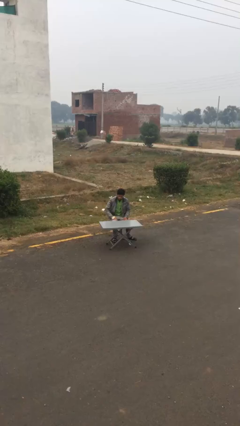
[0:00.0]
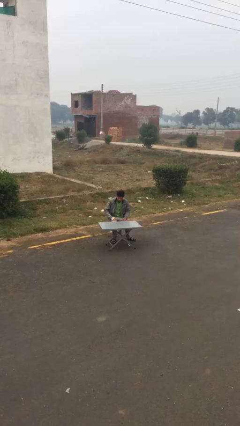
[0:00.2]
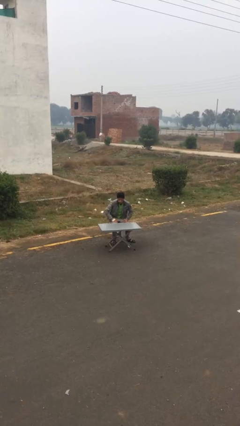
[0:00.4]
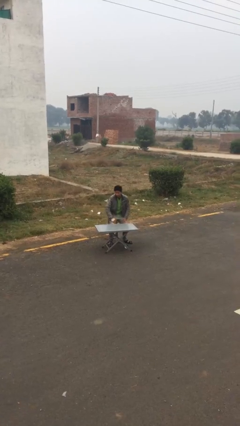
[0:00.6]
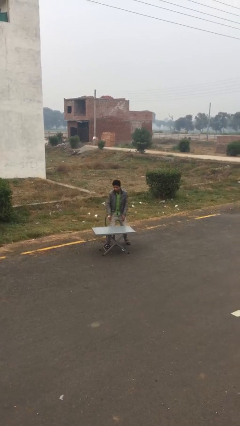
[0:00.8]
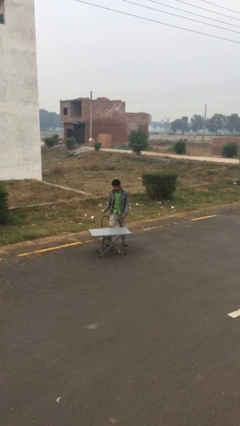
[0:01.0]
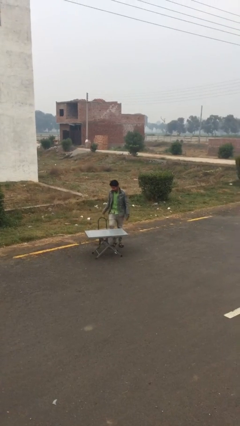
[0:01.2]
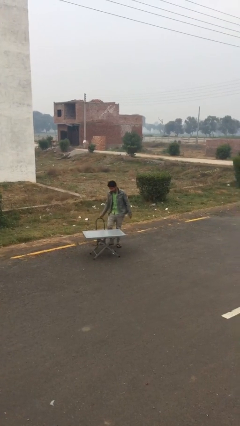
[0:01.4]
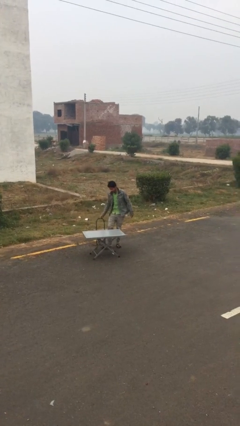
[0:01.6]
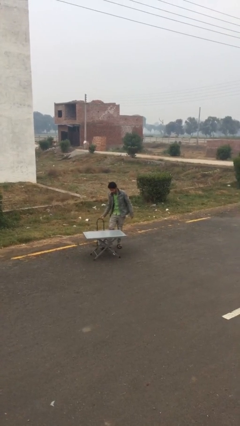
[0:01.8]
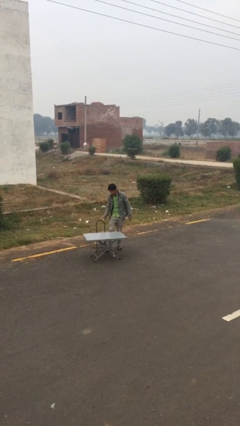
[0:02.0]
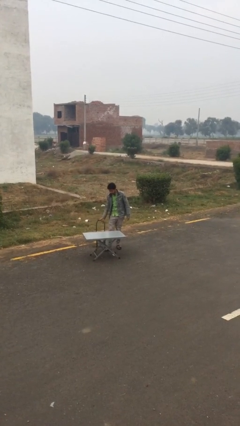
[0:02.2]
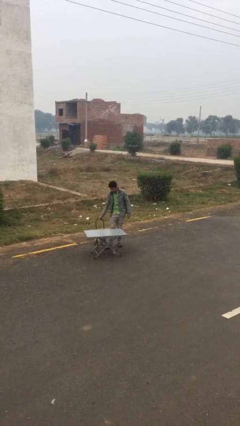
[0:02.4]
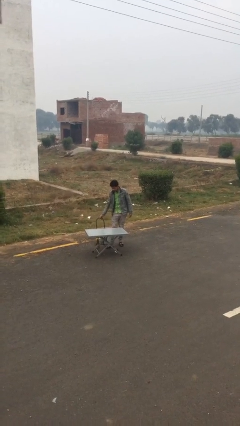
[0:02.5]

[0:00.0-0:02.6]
person stands up

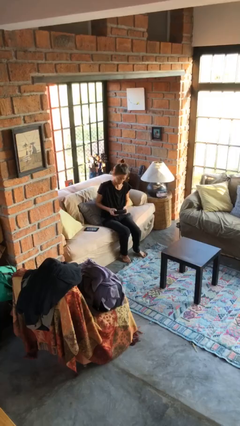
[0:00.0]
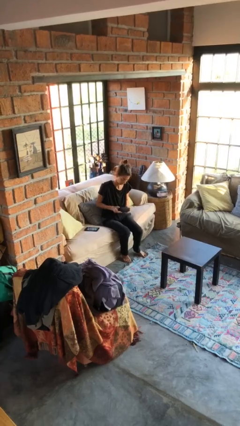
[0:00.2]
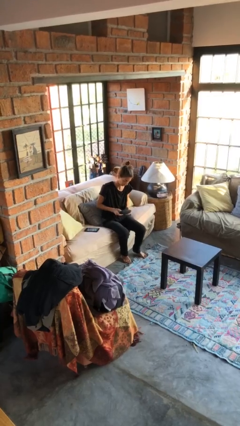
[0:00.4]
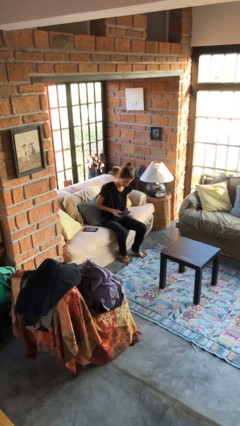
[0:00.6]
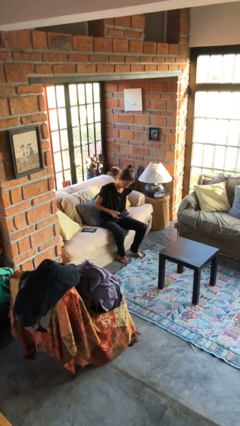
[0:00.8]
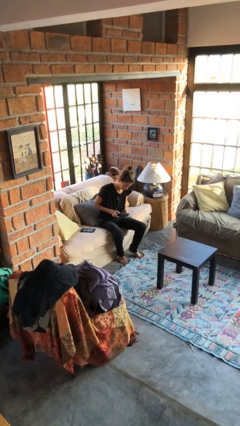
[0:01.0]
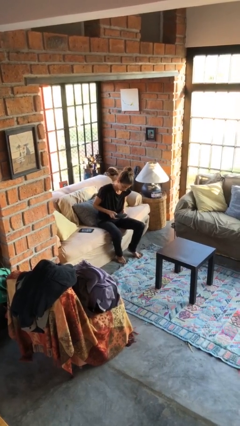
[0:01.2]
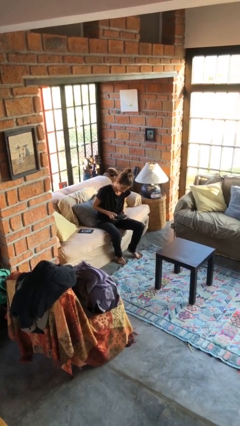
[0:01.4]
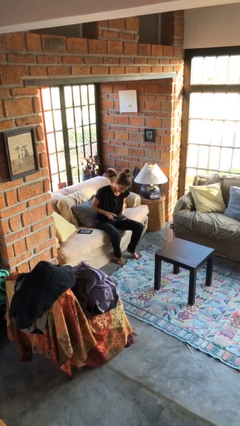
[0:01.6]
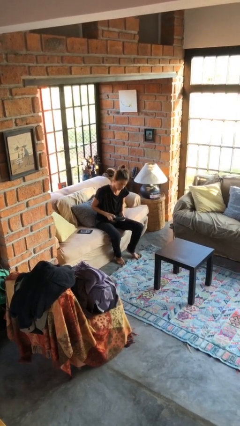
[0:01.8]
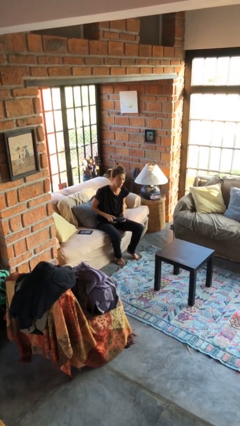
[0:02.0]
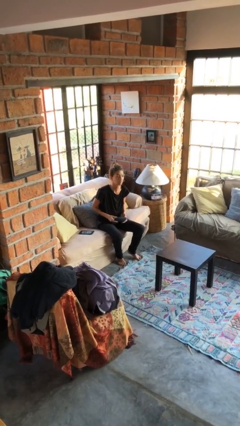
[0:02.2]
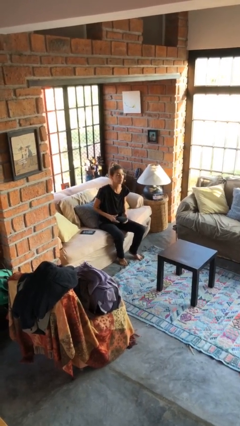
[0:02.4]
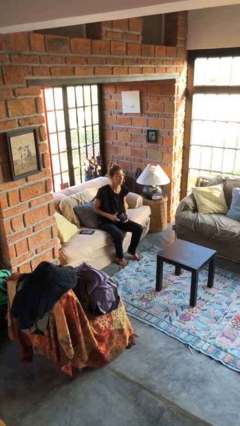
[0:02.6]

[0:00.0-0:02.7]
person interacts with handheld game

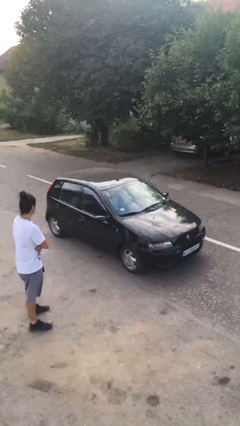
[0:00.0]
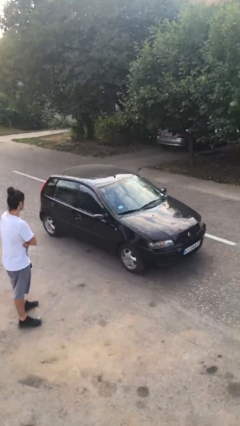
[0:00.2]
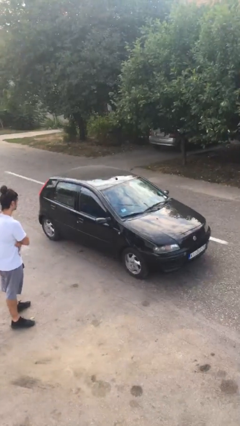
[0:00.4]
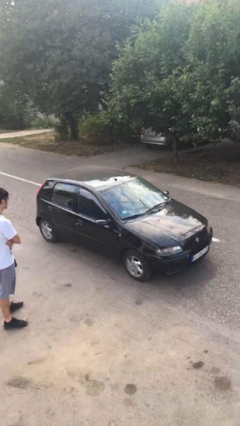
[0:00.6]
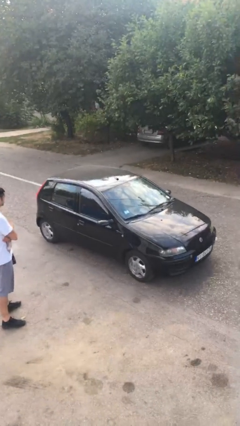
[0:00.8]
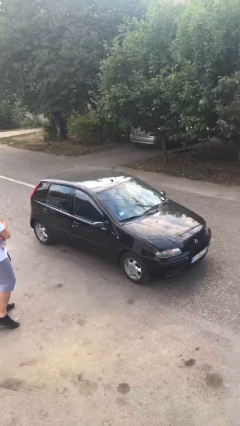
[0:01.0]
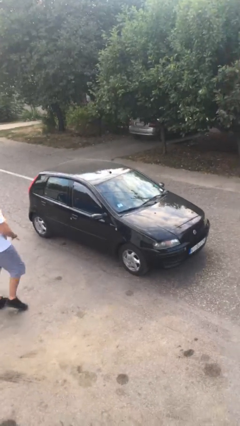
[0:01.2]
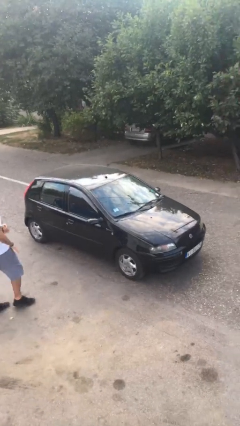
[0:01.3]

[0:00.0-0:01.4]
car picks up person

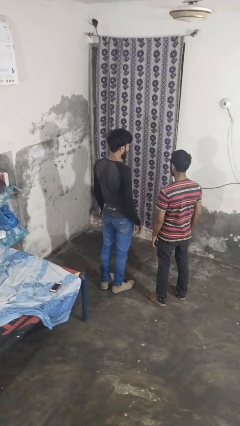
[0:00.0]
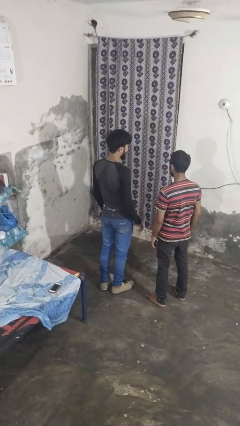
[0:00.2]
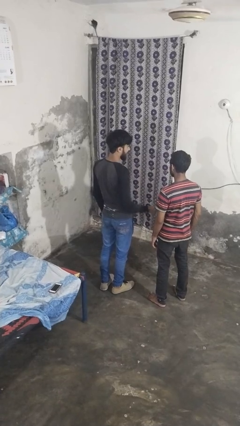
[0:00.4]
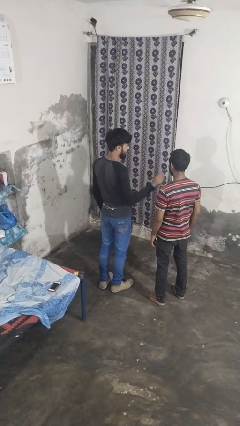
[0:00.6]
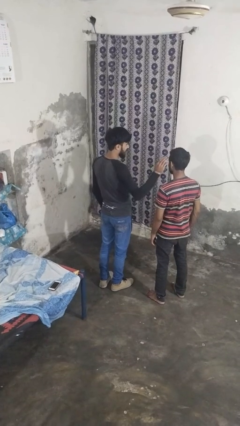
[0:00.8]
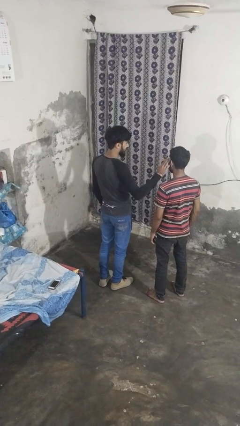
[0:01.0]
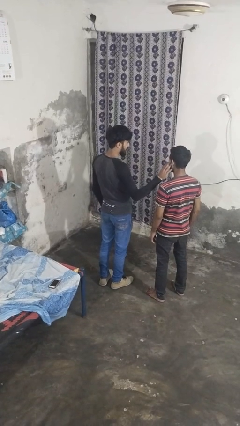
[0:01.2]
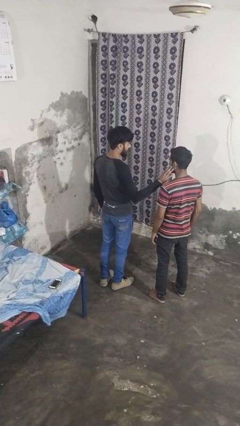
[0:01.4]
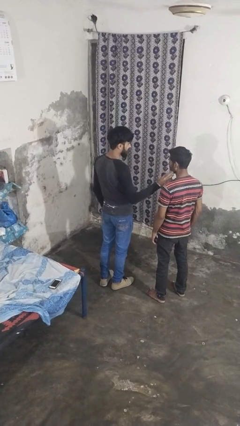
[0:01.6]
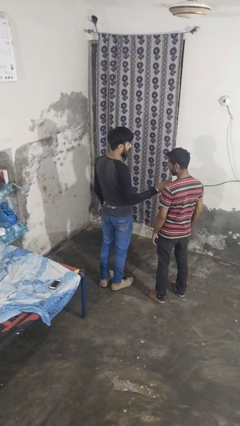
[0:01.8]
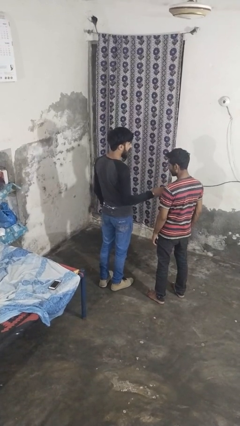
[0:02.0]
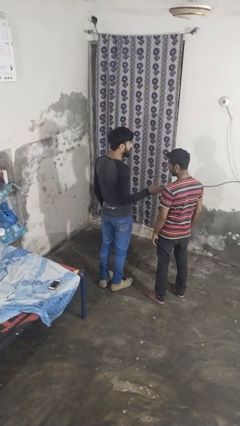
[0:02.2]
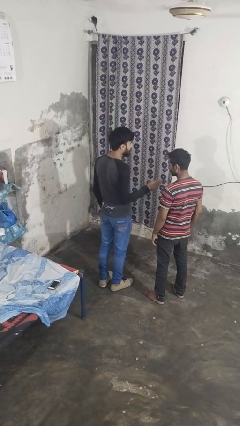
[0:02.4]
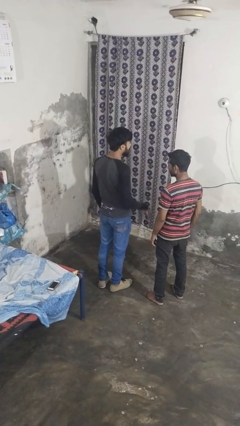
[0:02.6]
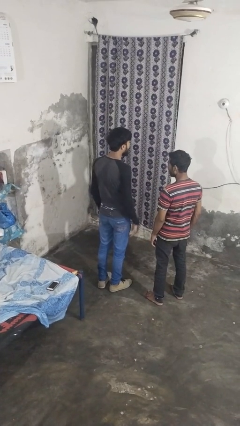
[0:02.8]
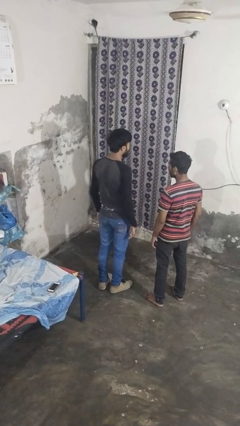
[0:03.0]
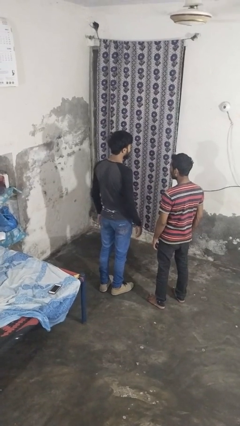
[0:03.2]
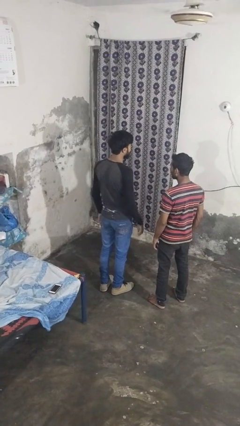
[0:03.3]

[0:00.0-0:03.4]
person touches face of person

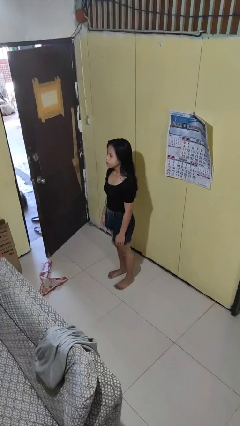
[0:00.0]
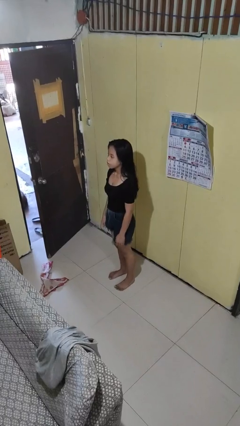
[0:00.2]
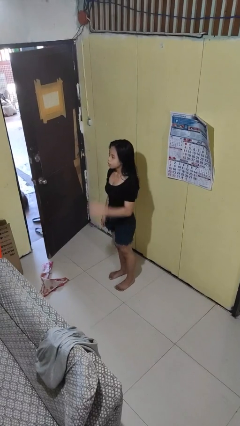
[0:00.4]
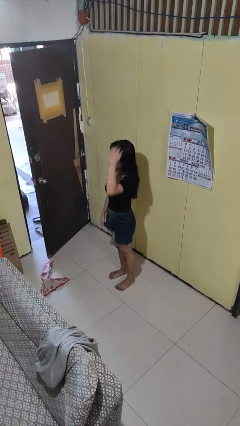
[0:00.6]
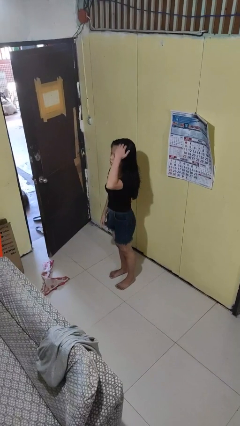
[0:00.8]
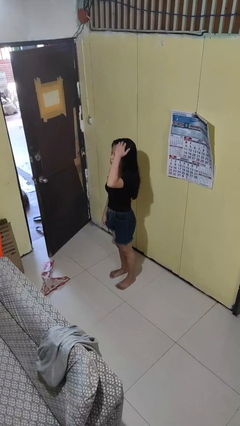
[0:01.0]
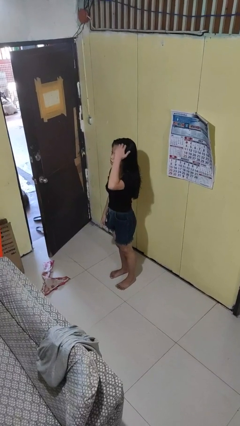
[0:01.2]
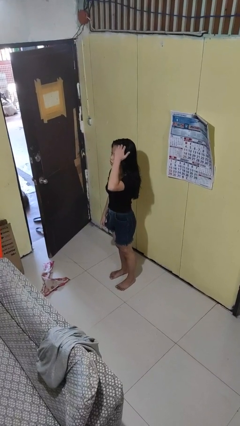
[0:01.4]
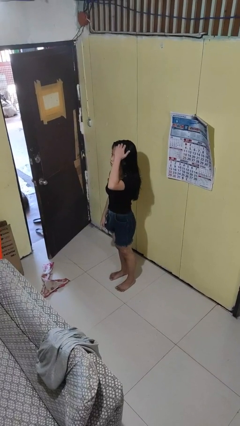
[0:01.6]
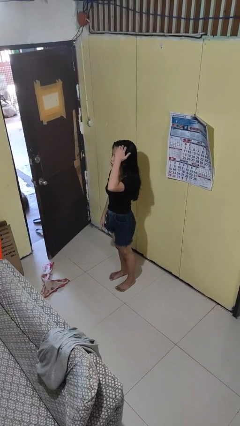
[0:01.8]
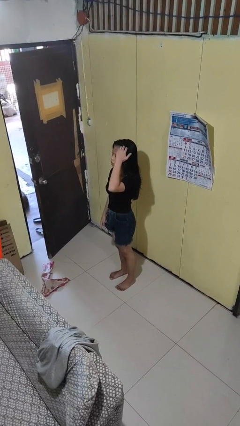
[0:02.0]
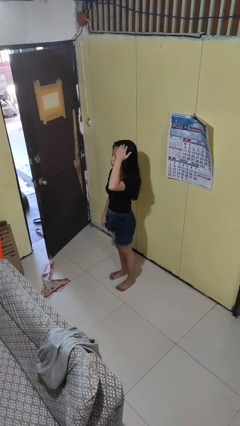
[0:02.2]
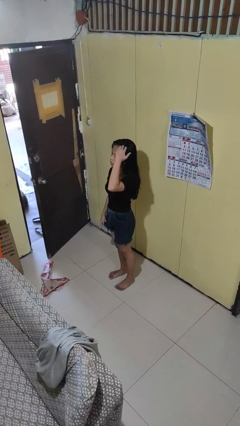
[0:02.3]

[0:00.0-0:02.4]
person scratches face

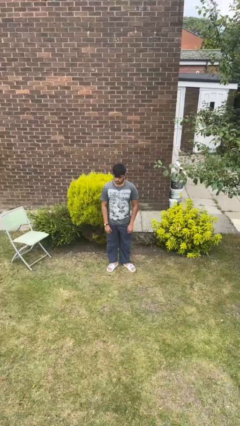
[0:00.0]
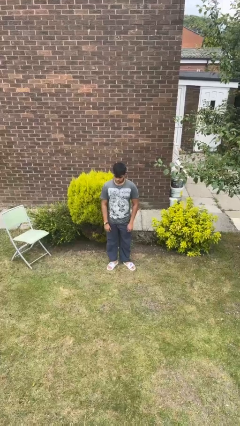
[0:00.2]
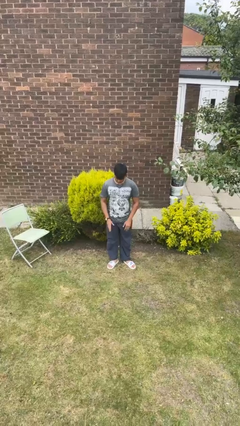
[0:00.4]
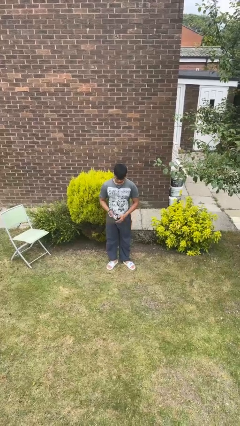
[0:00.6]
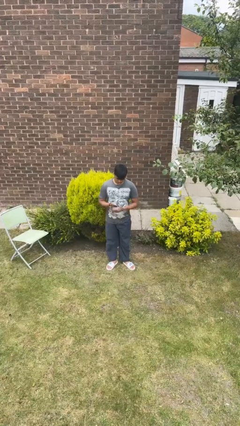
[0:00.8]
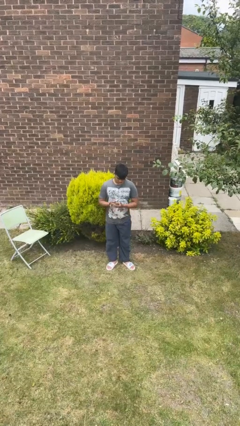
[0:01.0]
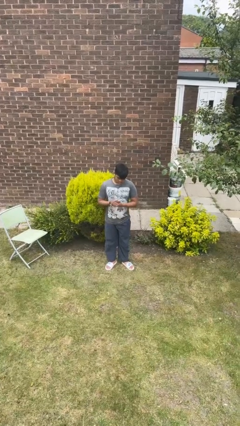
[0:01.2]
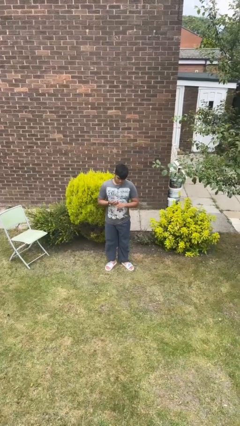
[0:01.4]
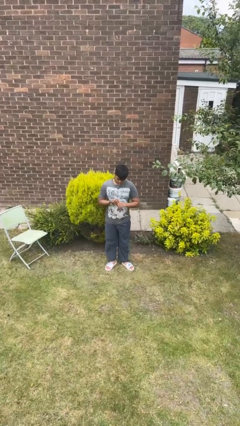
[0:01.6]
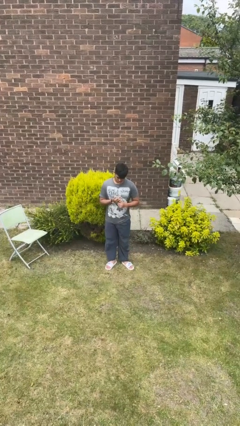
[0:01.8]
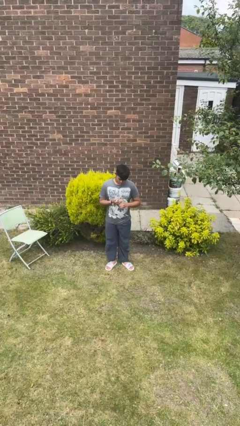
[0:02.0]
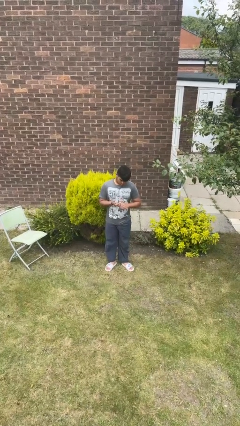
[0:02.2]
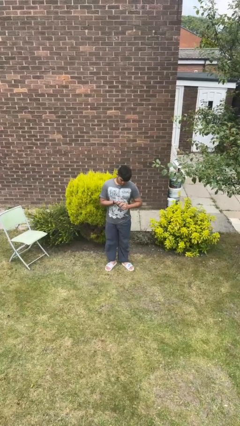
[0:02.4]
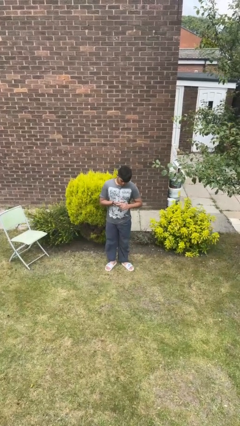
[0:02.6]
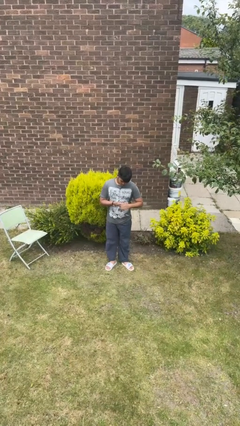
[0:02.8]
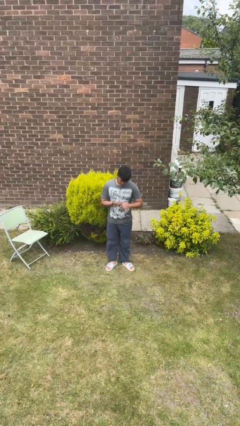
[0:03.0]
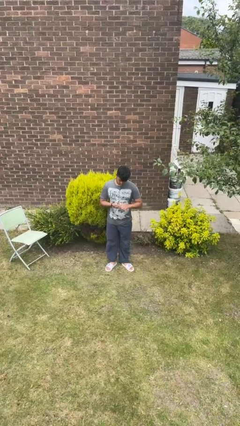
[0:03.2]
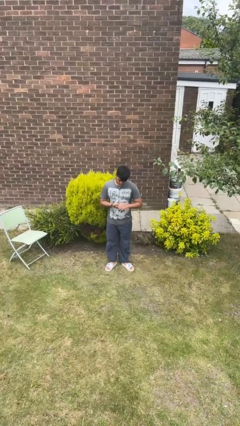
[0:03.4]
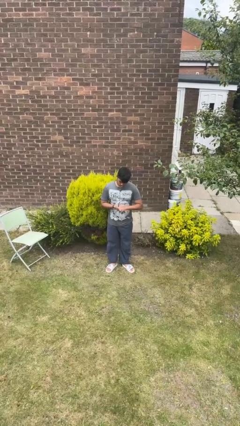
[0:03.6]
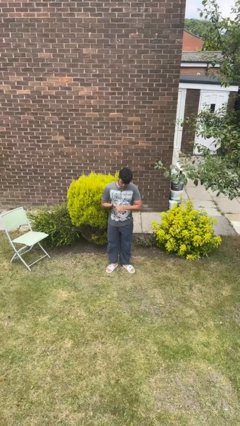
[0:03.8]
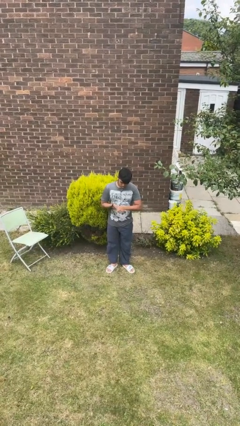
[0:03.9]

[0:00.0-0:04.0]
person cracks knuckles

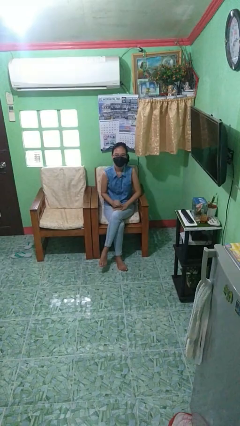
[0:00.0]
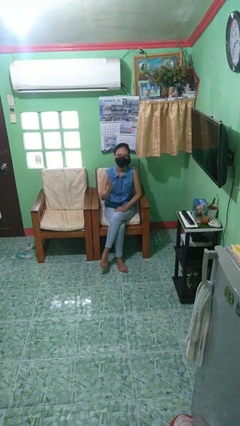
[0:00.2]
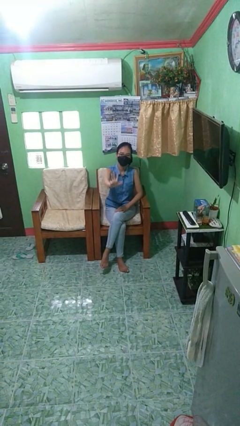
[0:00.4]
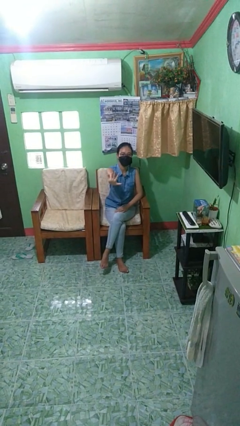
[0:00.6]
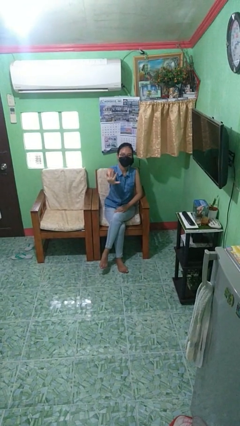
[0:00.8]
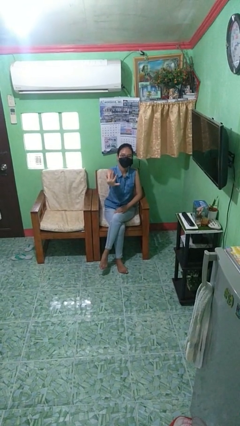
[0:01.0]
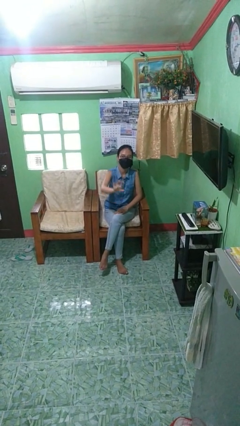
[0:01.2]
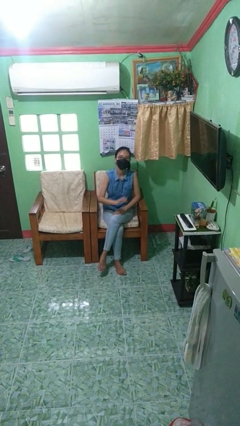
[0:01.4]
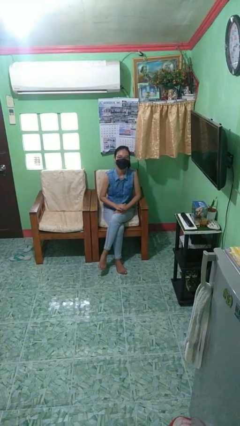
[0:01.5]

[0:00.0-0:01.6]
person gestures stop
